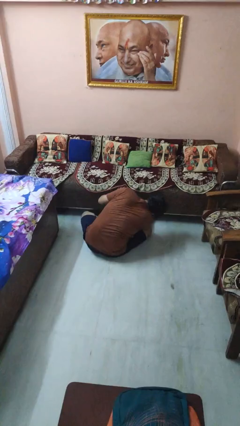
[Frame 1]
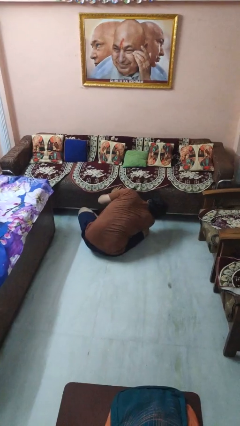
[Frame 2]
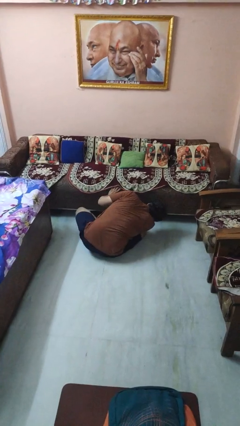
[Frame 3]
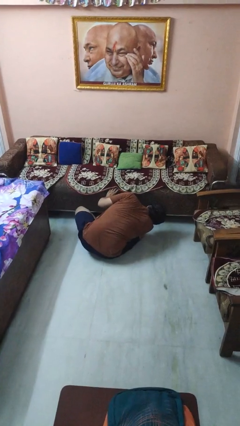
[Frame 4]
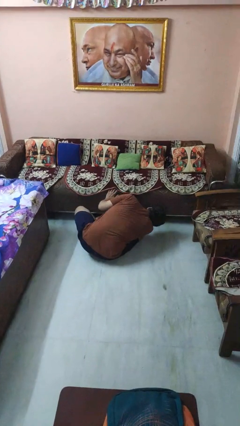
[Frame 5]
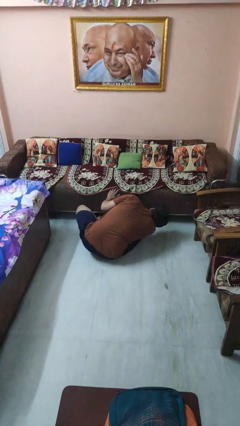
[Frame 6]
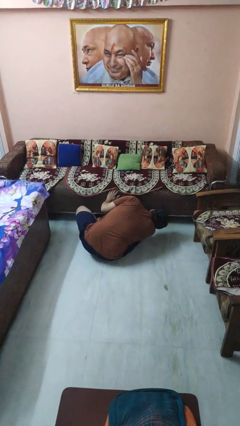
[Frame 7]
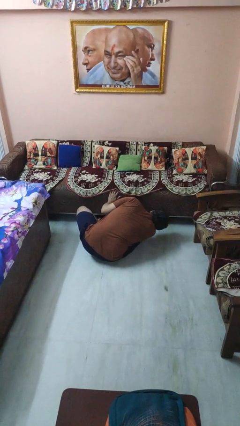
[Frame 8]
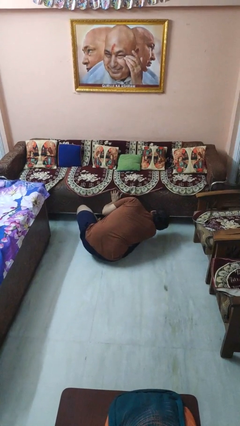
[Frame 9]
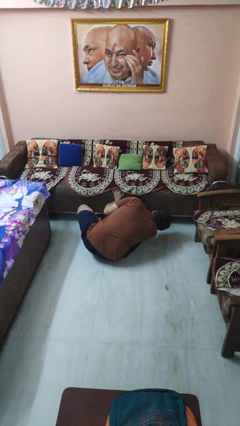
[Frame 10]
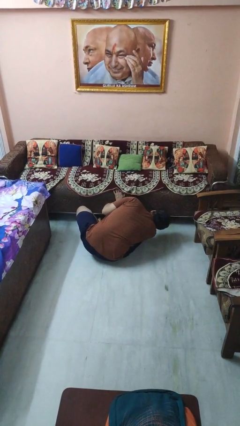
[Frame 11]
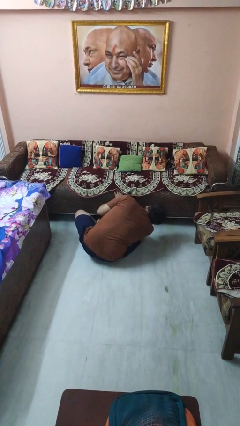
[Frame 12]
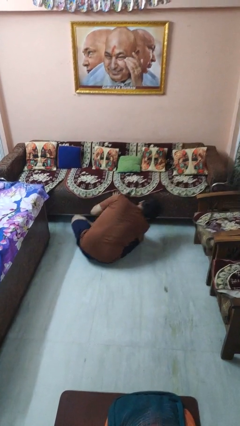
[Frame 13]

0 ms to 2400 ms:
person searches under couch

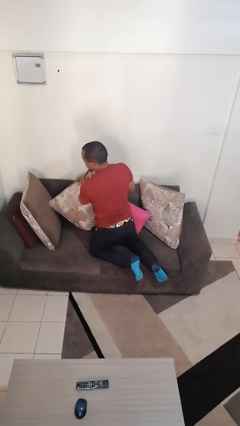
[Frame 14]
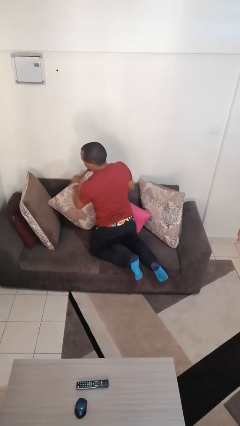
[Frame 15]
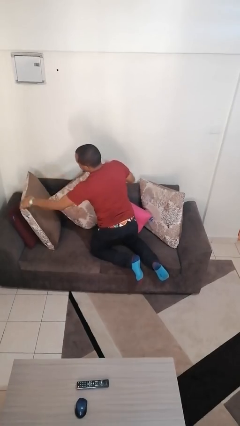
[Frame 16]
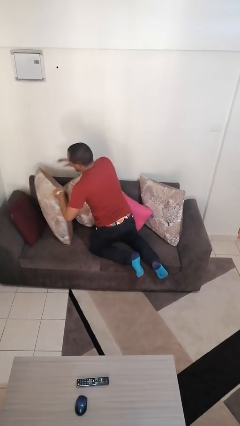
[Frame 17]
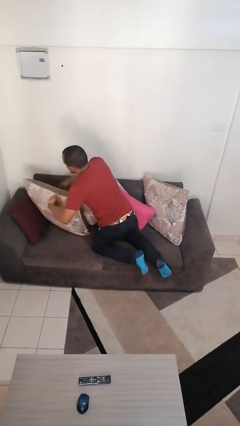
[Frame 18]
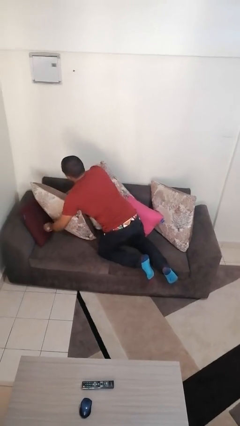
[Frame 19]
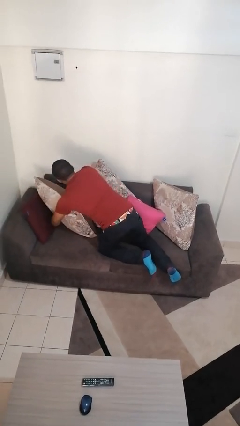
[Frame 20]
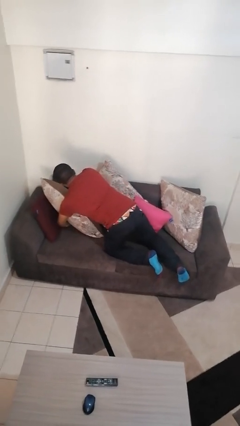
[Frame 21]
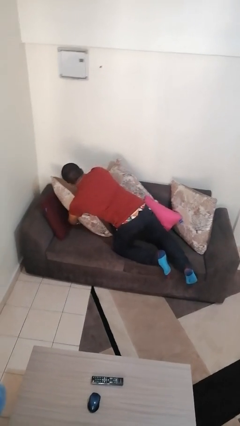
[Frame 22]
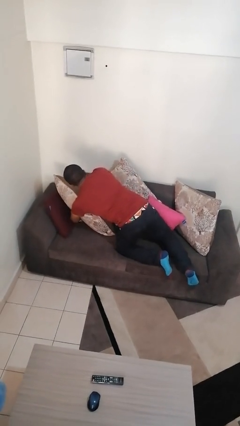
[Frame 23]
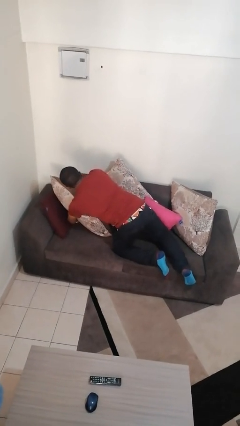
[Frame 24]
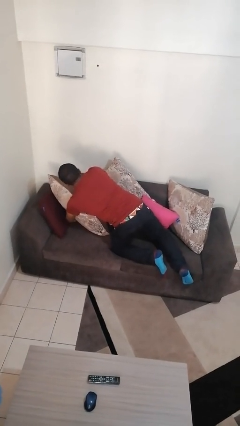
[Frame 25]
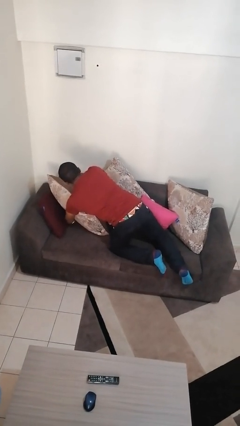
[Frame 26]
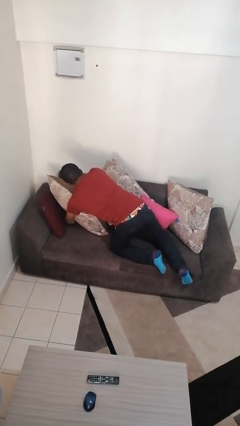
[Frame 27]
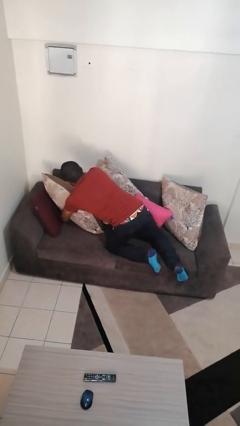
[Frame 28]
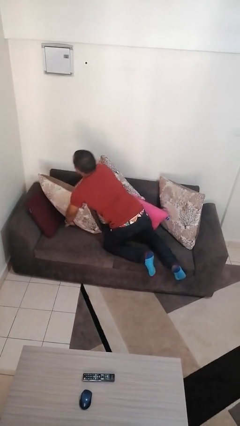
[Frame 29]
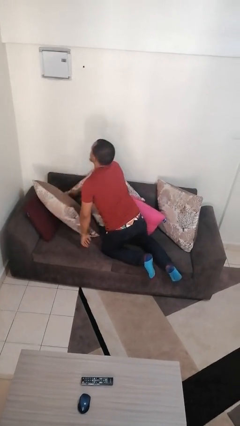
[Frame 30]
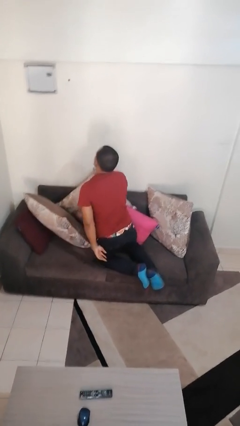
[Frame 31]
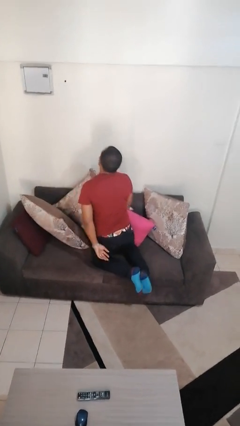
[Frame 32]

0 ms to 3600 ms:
person searches in couch

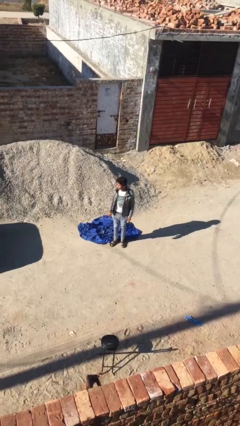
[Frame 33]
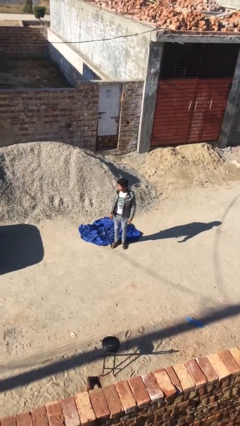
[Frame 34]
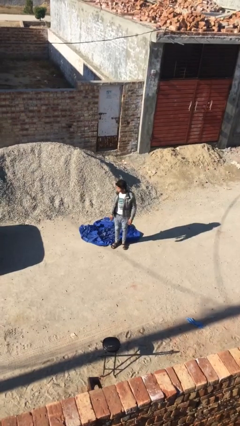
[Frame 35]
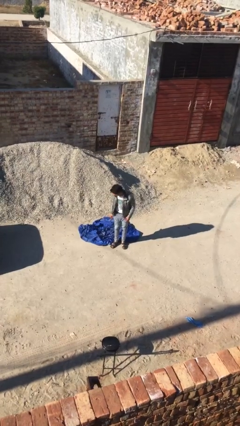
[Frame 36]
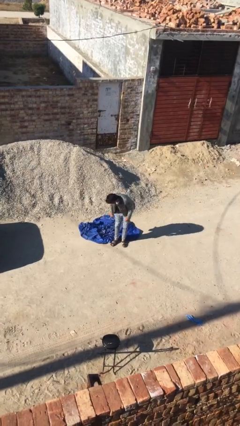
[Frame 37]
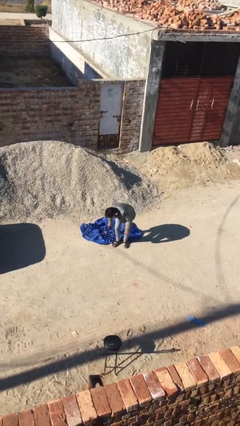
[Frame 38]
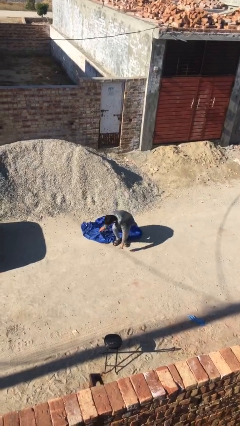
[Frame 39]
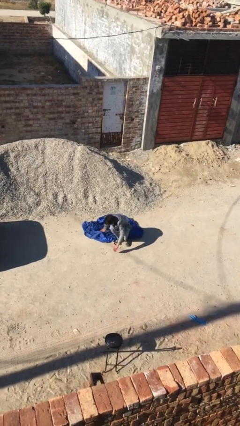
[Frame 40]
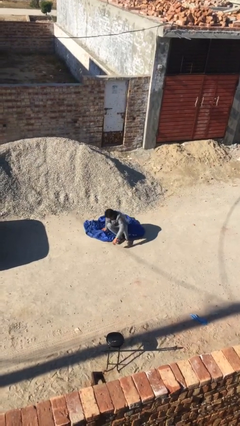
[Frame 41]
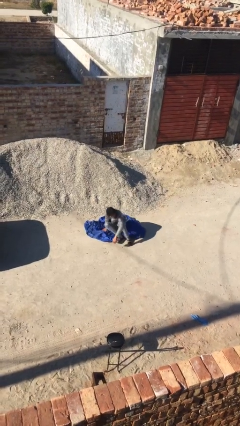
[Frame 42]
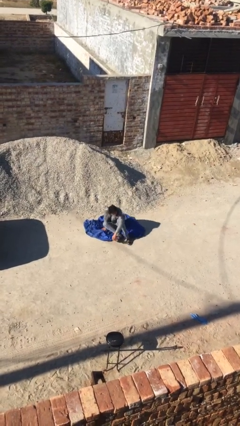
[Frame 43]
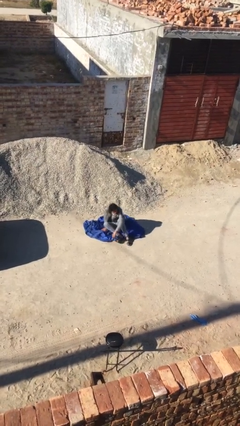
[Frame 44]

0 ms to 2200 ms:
person sits down

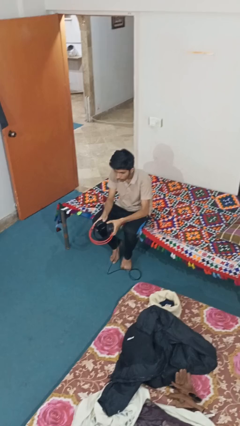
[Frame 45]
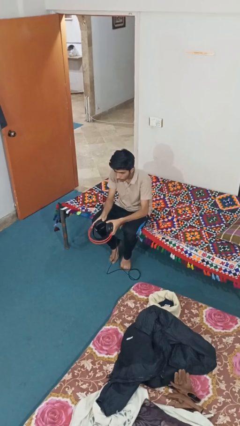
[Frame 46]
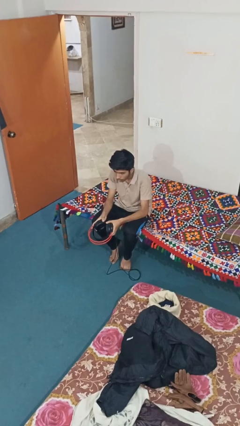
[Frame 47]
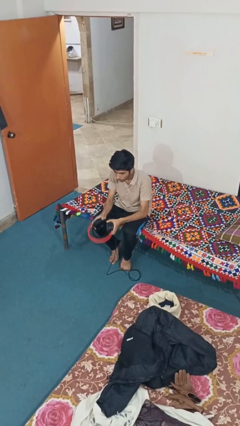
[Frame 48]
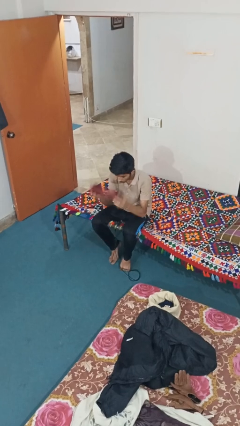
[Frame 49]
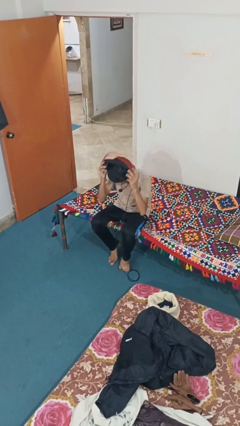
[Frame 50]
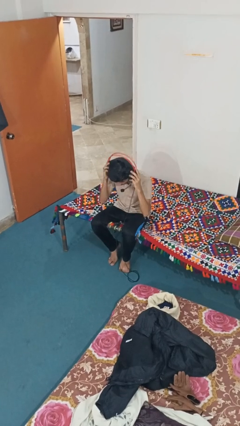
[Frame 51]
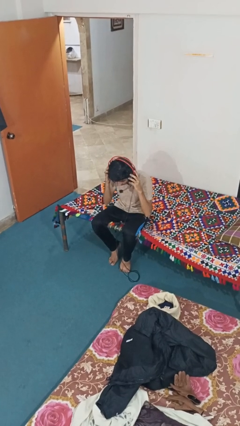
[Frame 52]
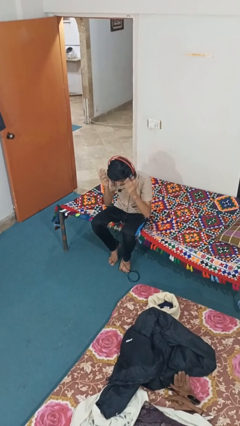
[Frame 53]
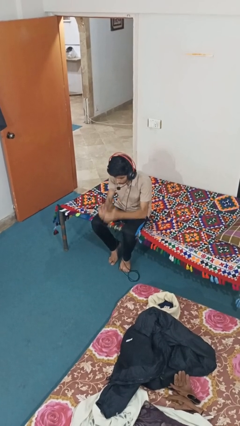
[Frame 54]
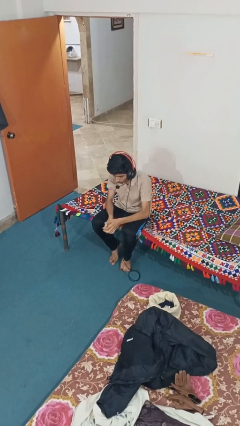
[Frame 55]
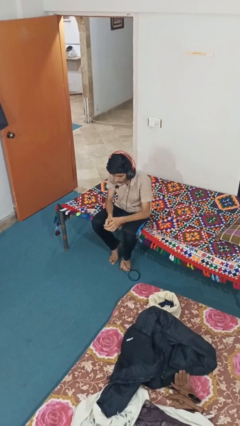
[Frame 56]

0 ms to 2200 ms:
person puts on headphones

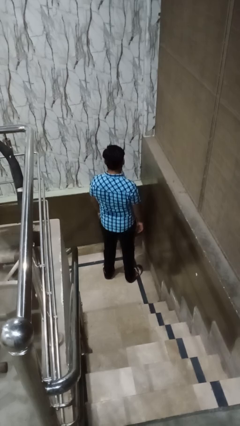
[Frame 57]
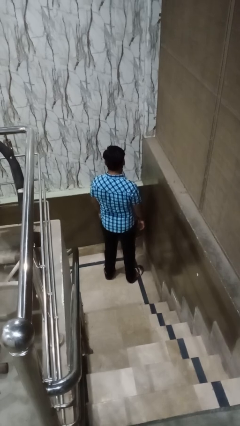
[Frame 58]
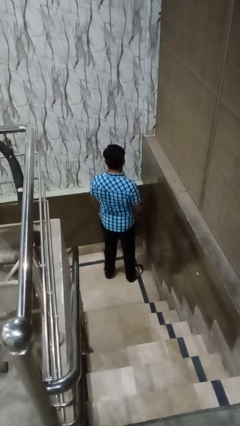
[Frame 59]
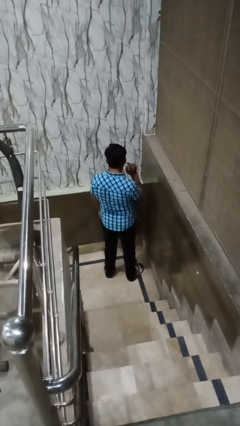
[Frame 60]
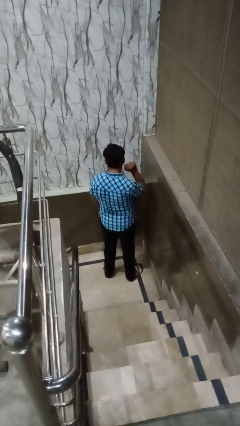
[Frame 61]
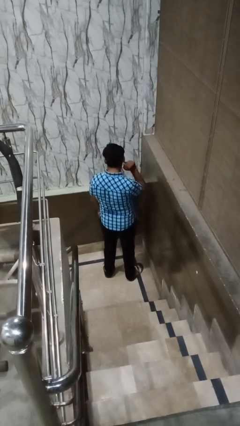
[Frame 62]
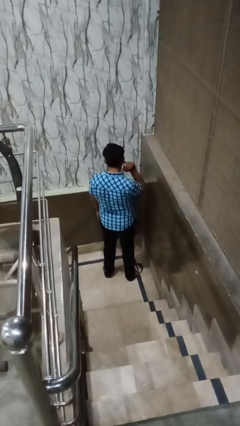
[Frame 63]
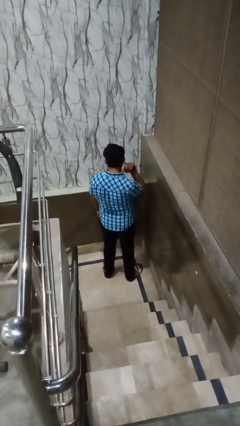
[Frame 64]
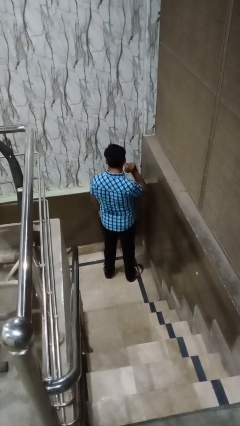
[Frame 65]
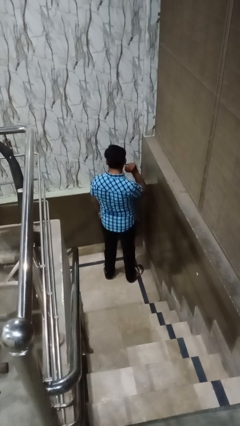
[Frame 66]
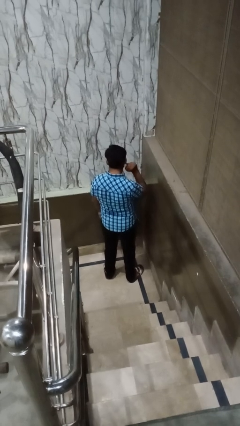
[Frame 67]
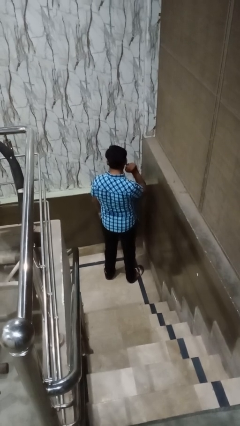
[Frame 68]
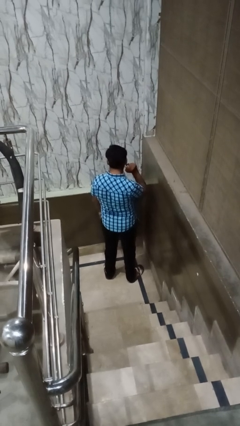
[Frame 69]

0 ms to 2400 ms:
person touches earlobe

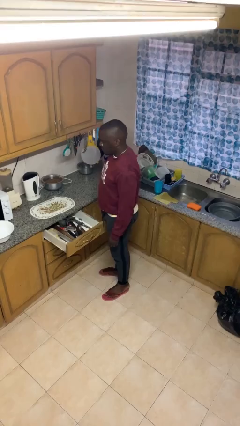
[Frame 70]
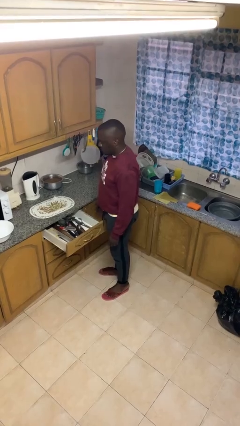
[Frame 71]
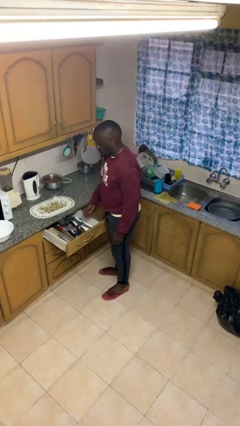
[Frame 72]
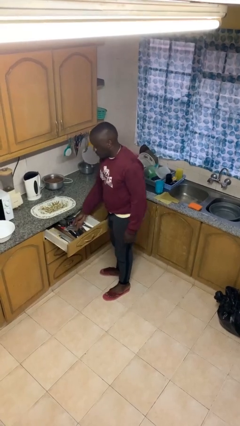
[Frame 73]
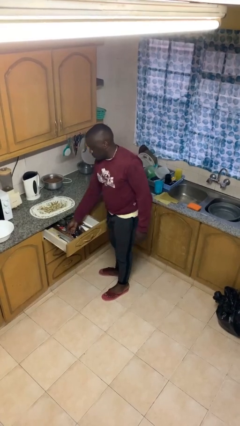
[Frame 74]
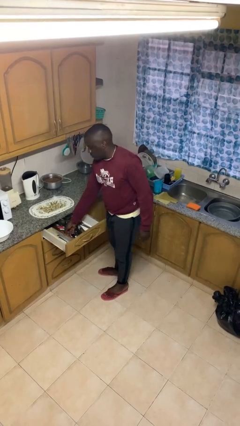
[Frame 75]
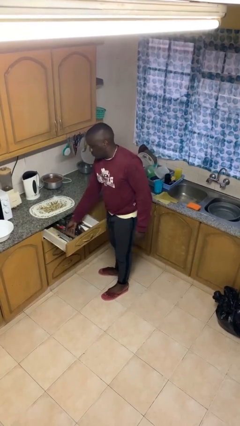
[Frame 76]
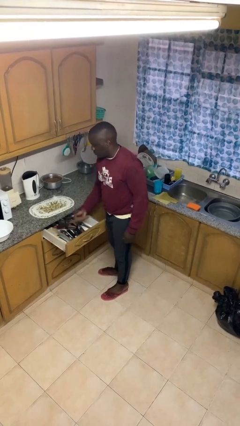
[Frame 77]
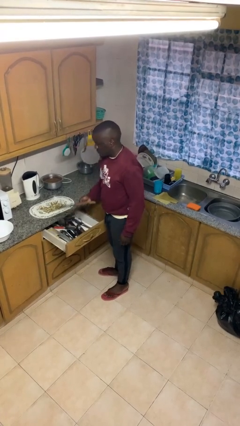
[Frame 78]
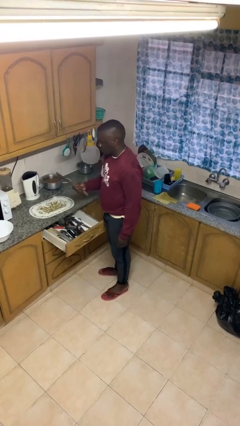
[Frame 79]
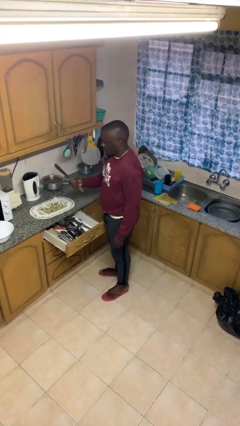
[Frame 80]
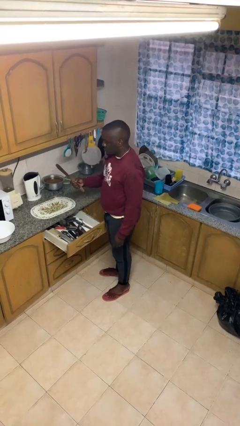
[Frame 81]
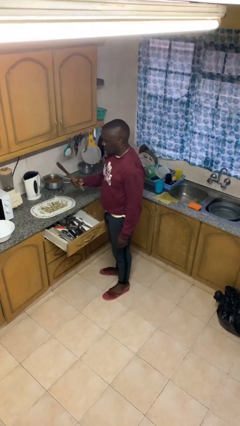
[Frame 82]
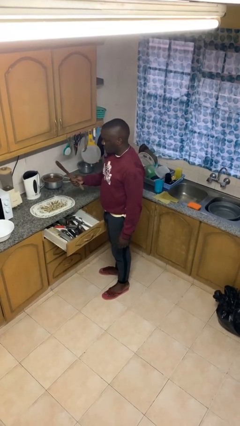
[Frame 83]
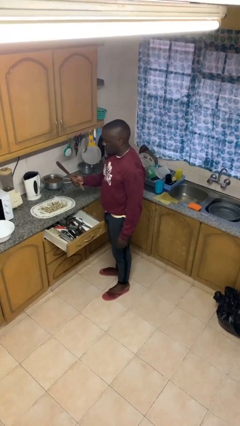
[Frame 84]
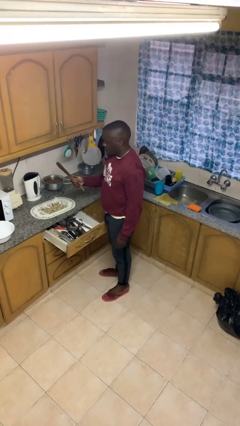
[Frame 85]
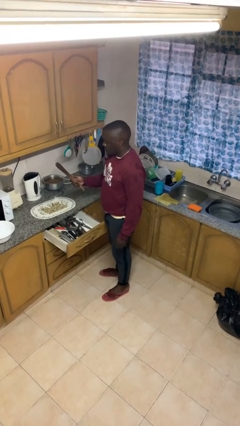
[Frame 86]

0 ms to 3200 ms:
person takes object from kitchen drawer

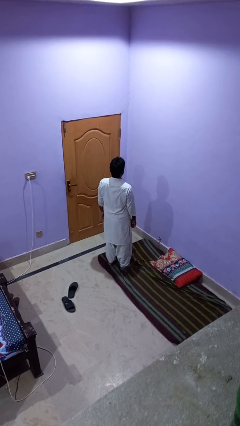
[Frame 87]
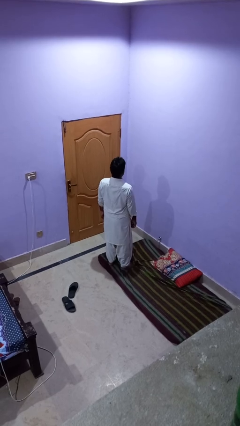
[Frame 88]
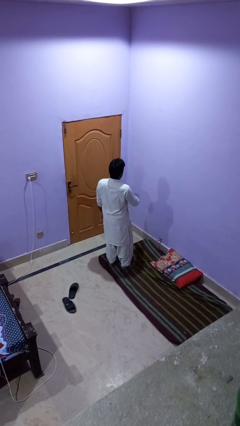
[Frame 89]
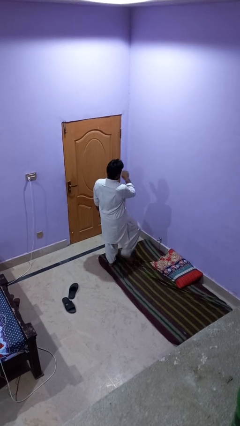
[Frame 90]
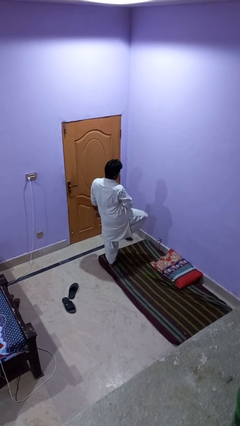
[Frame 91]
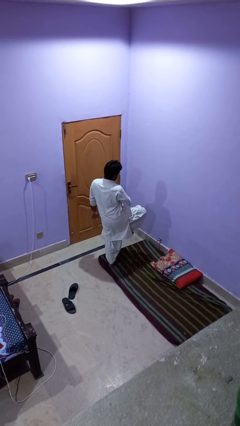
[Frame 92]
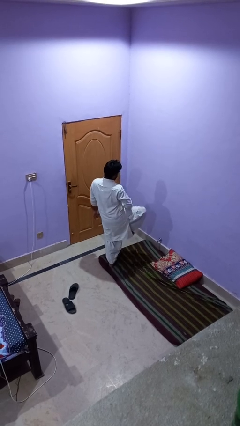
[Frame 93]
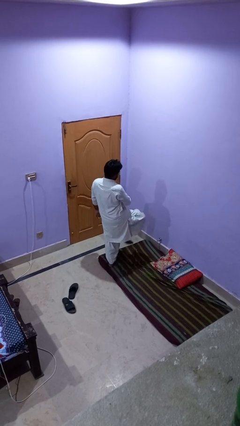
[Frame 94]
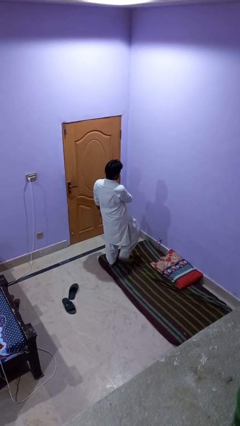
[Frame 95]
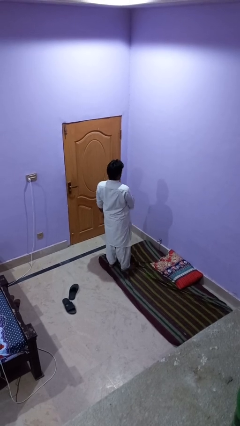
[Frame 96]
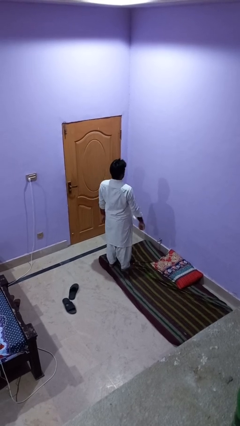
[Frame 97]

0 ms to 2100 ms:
person slaps hands on thighs
